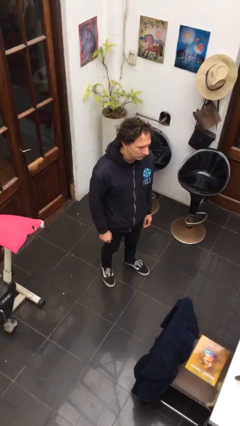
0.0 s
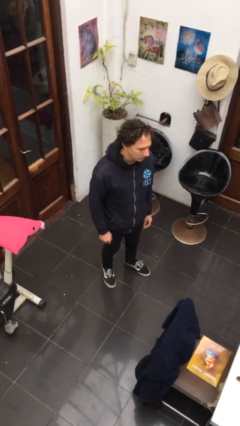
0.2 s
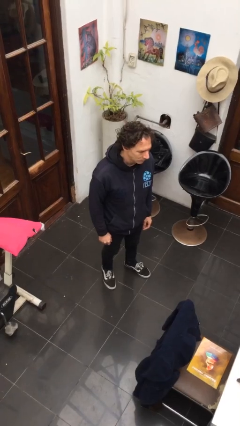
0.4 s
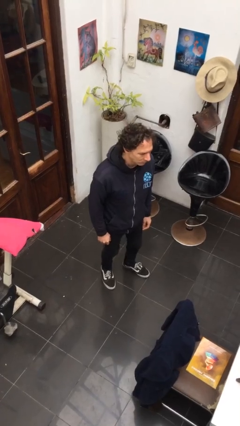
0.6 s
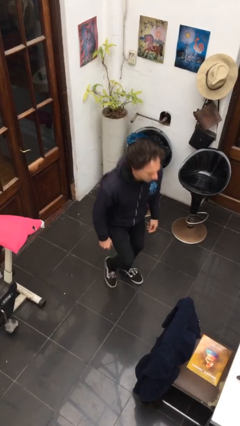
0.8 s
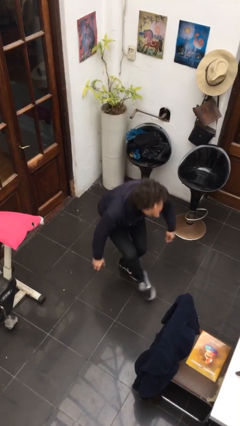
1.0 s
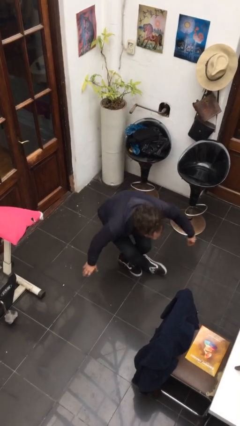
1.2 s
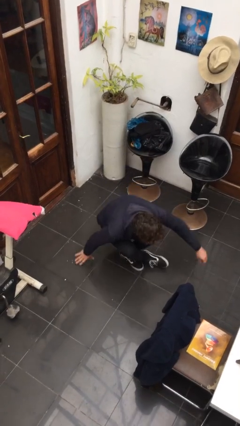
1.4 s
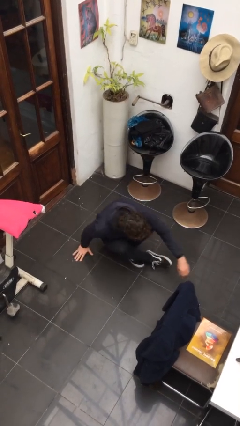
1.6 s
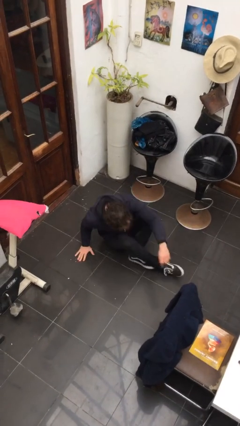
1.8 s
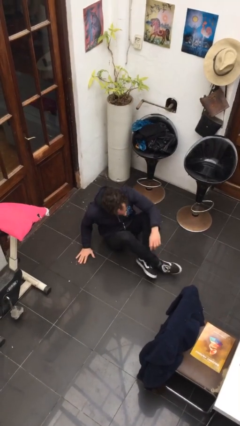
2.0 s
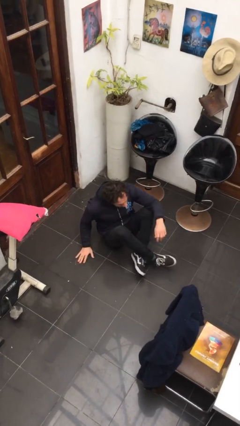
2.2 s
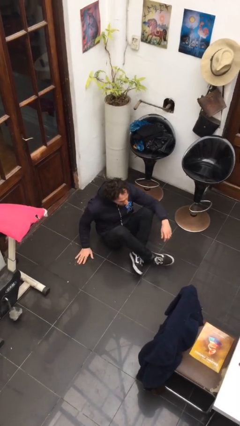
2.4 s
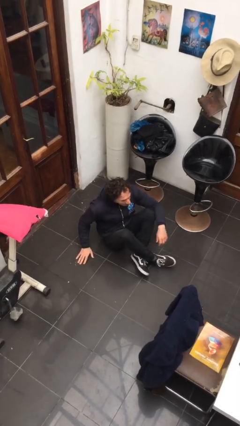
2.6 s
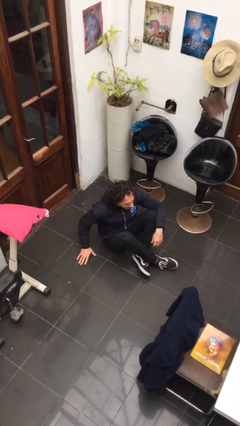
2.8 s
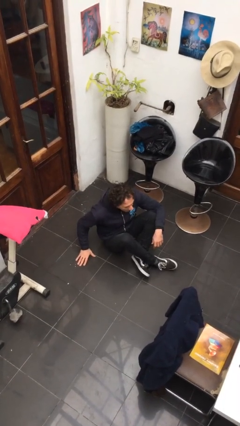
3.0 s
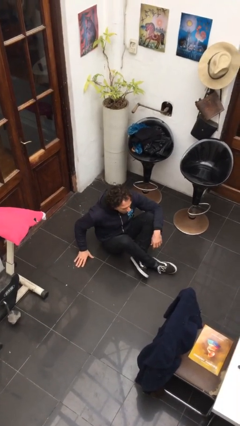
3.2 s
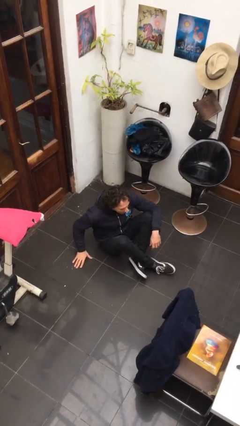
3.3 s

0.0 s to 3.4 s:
person sits crisscross

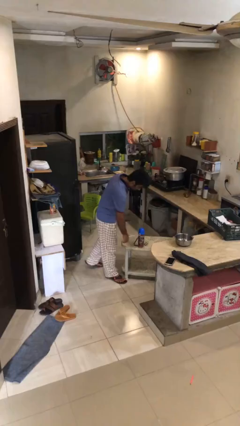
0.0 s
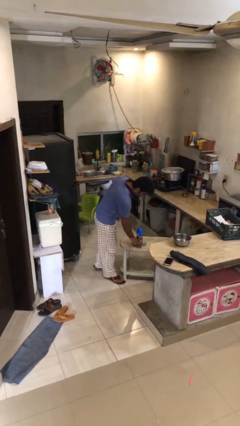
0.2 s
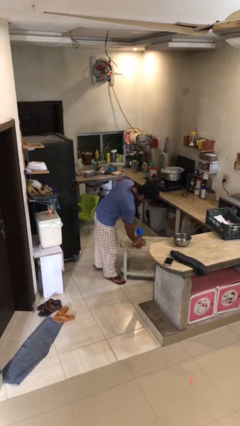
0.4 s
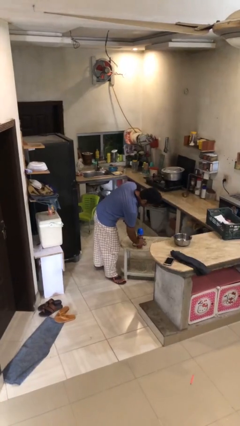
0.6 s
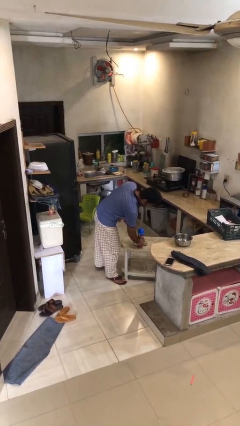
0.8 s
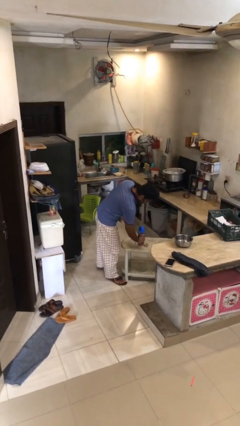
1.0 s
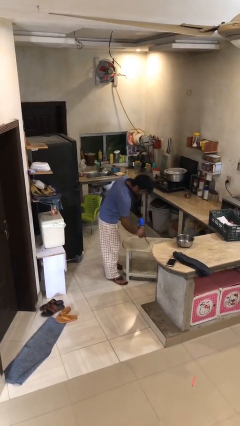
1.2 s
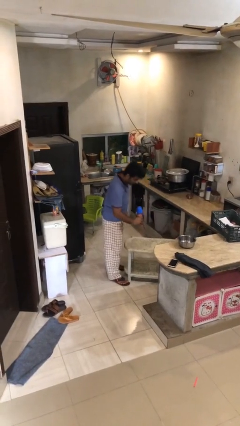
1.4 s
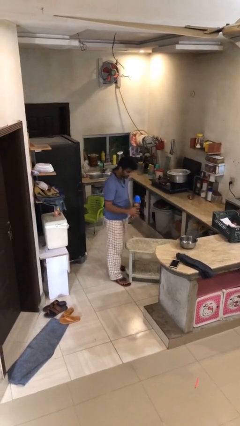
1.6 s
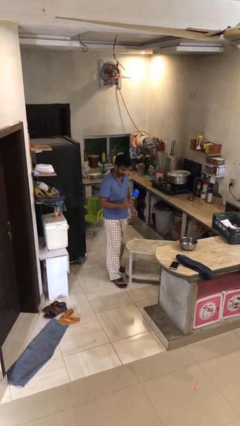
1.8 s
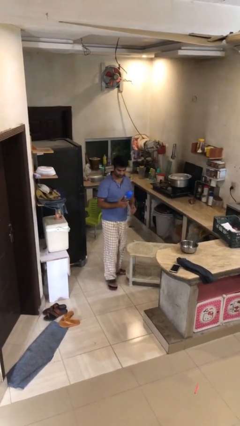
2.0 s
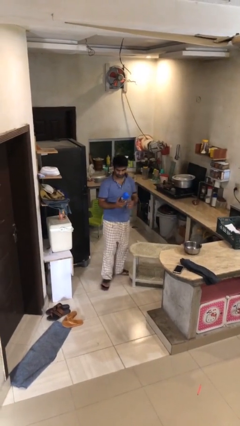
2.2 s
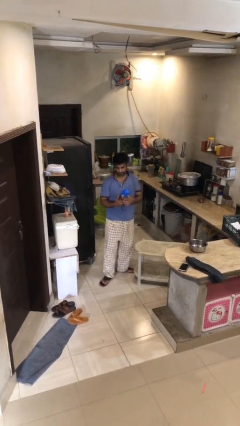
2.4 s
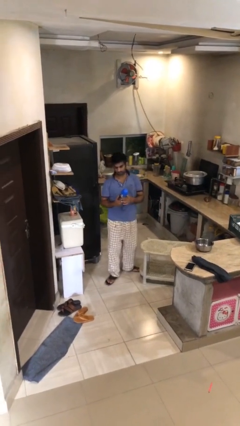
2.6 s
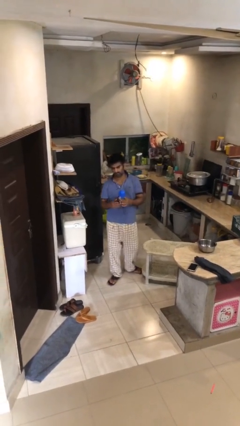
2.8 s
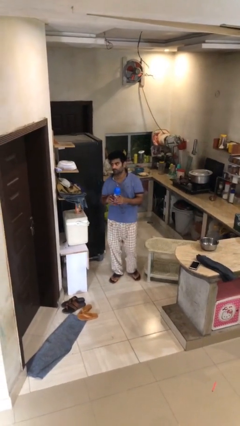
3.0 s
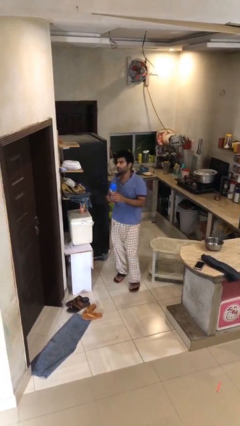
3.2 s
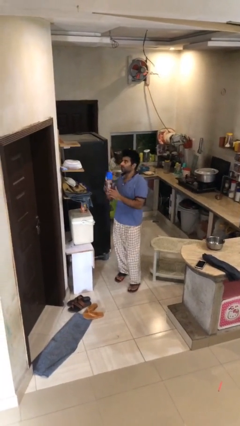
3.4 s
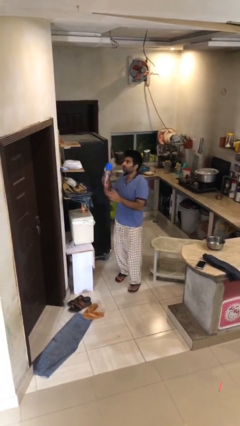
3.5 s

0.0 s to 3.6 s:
person picks up object from table

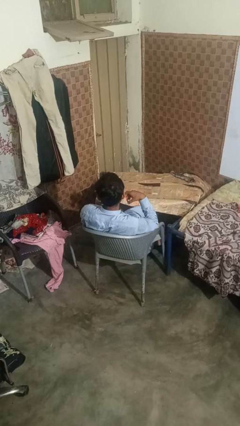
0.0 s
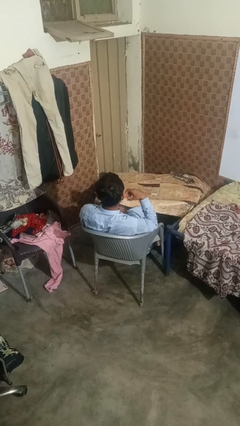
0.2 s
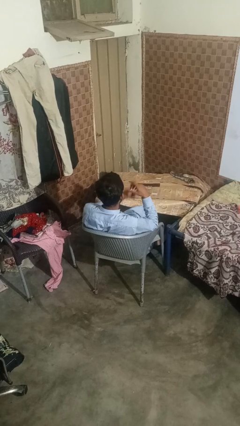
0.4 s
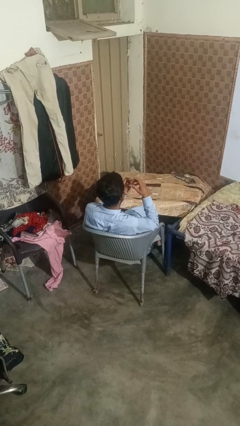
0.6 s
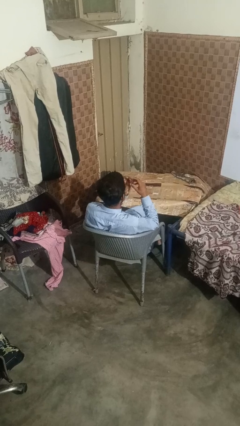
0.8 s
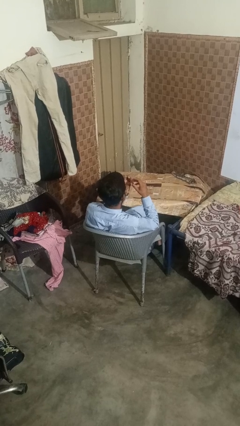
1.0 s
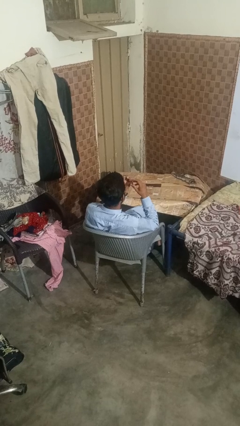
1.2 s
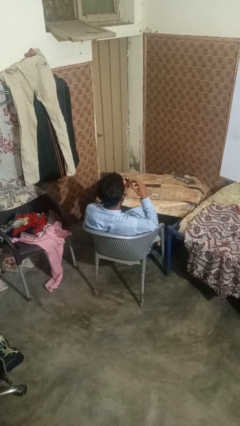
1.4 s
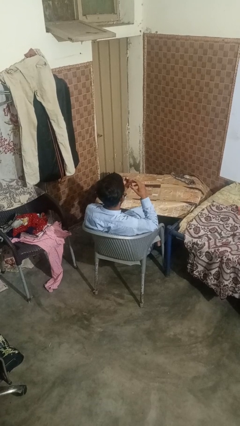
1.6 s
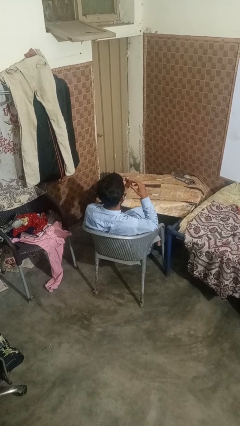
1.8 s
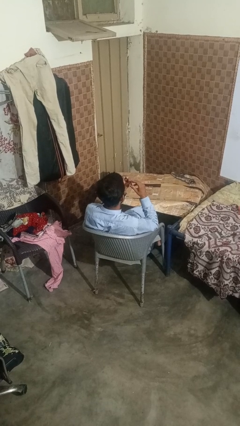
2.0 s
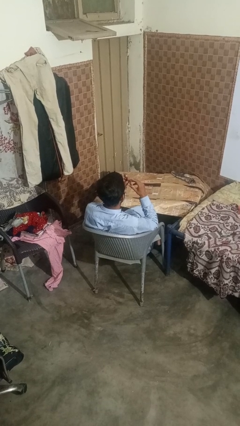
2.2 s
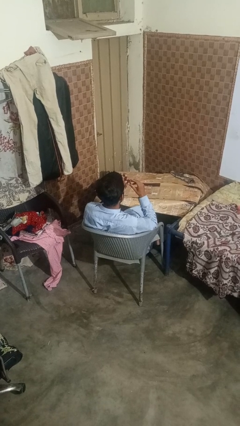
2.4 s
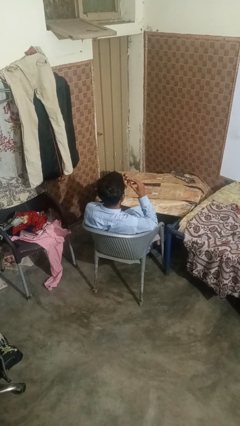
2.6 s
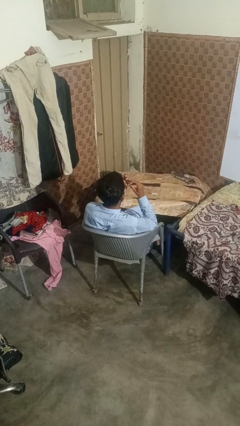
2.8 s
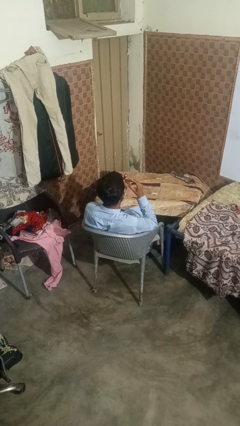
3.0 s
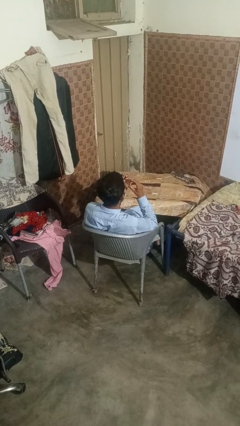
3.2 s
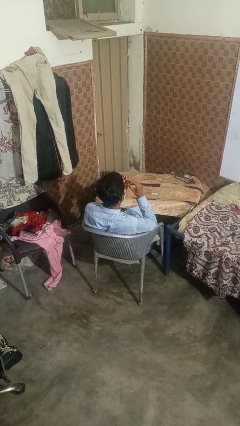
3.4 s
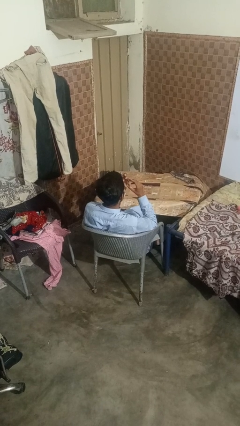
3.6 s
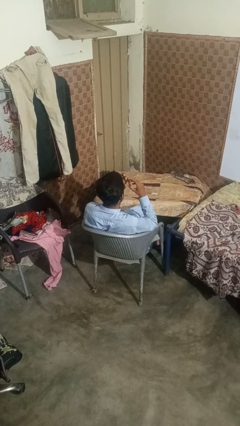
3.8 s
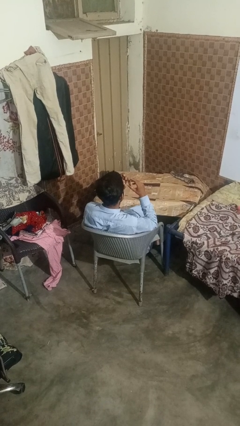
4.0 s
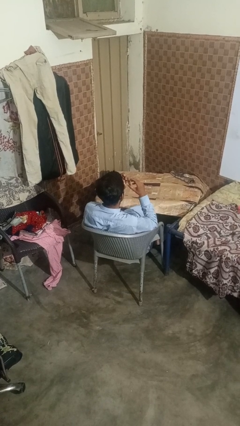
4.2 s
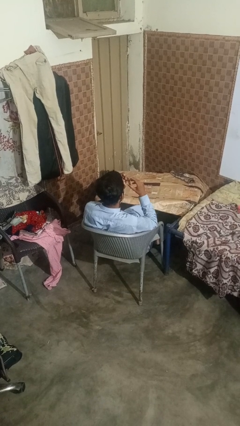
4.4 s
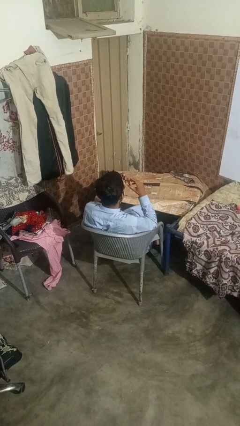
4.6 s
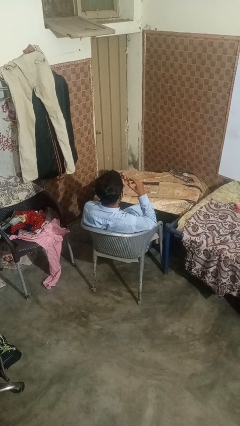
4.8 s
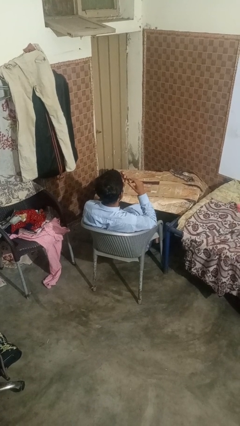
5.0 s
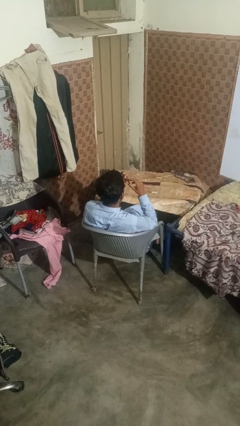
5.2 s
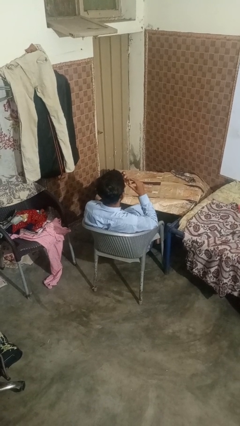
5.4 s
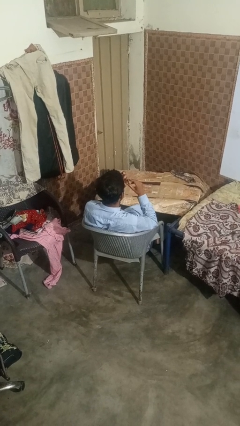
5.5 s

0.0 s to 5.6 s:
person clips fingernails

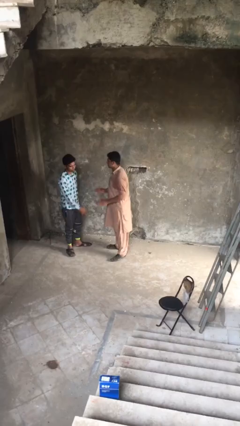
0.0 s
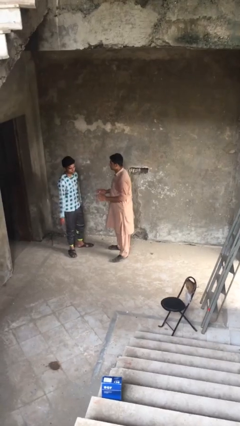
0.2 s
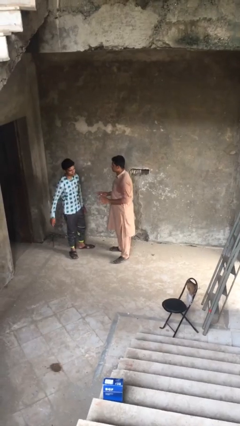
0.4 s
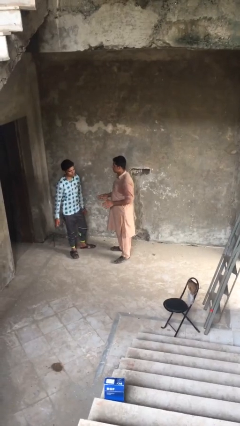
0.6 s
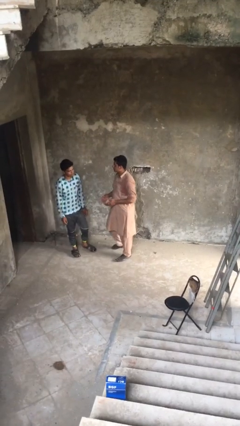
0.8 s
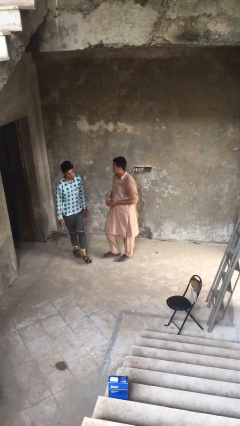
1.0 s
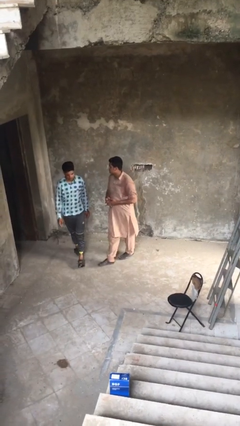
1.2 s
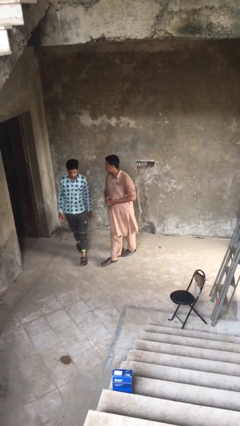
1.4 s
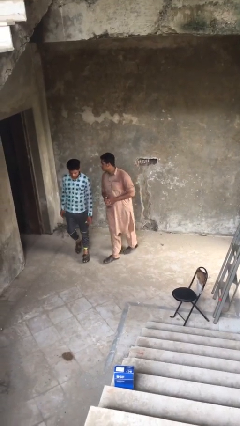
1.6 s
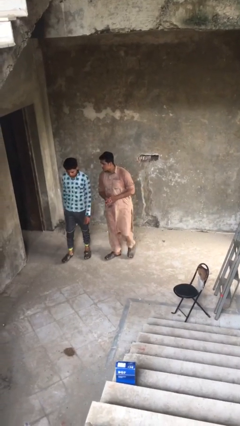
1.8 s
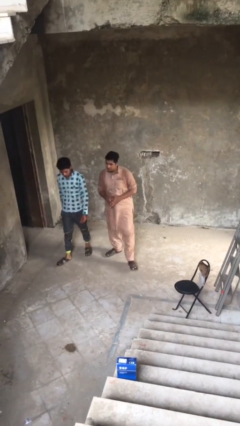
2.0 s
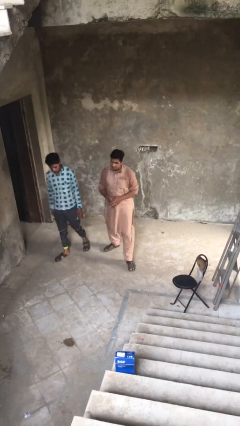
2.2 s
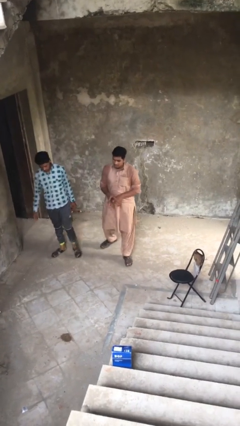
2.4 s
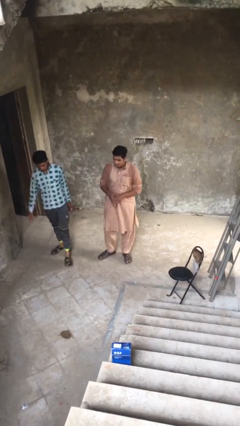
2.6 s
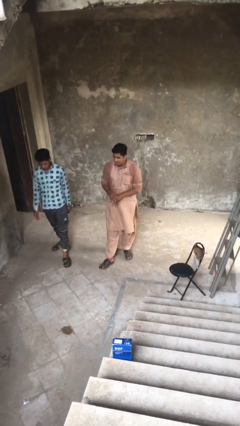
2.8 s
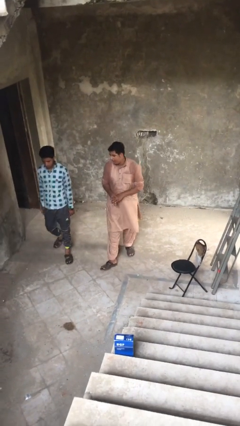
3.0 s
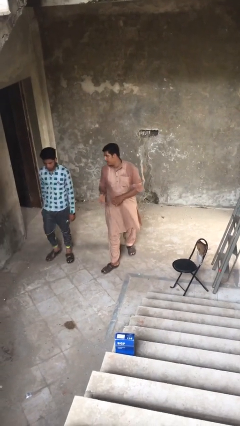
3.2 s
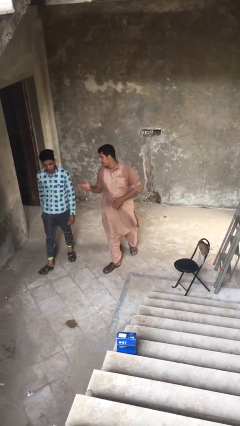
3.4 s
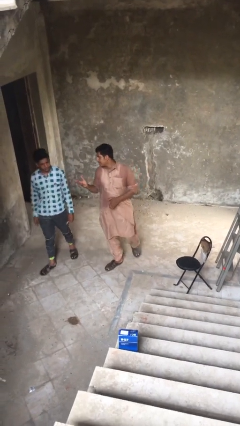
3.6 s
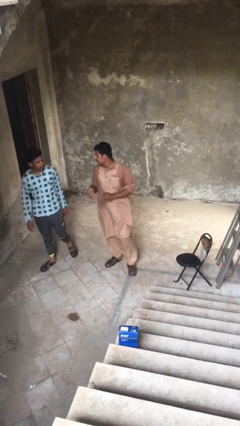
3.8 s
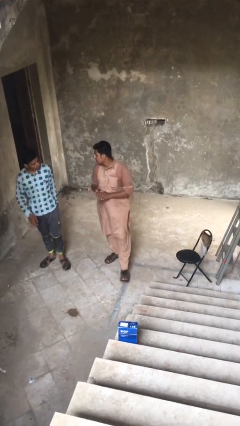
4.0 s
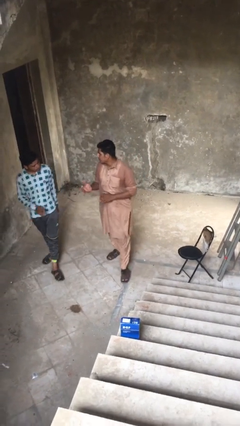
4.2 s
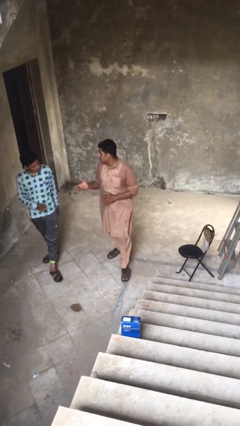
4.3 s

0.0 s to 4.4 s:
person talks to person

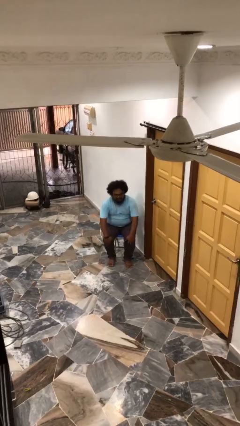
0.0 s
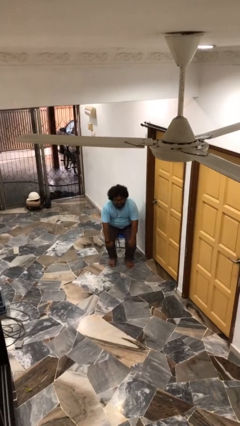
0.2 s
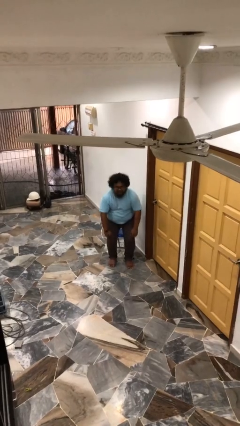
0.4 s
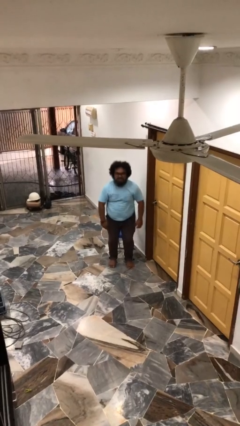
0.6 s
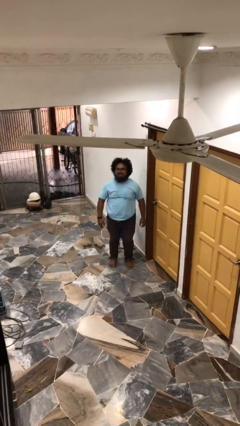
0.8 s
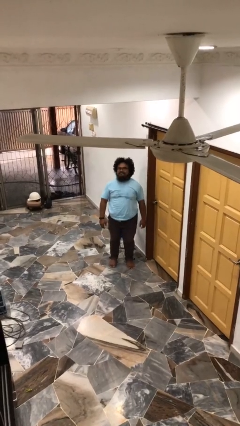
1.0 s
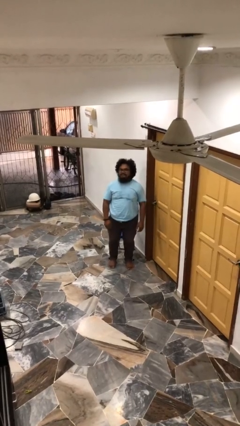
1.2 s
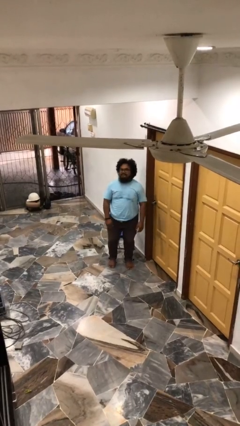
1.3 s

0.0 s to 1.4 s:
person stands up
